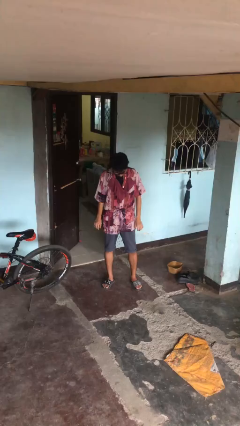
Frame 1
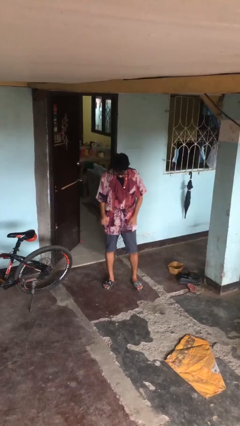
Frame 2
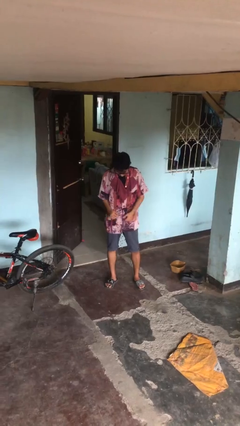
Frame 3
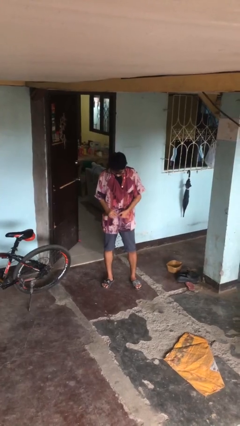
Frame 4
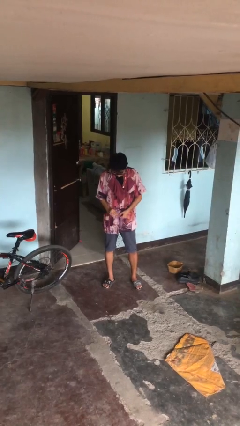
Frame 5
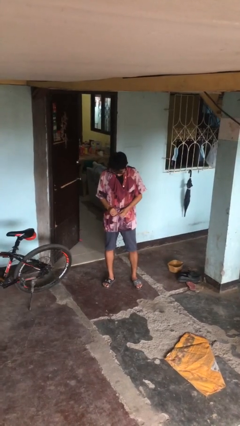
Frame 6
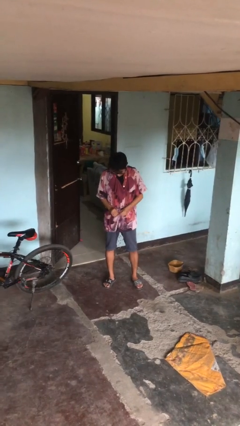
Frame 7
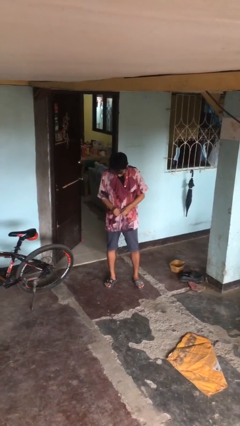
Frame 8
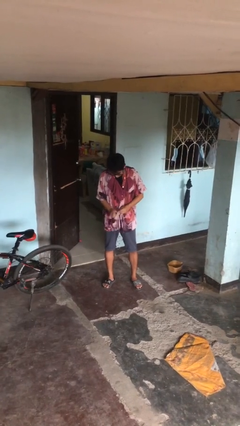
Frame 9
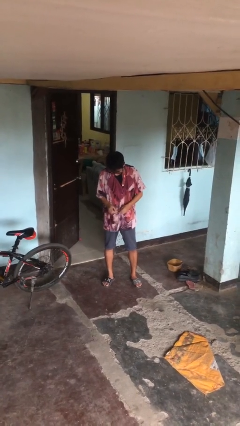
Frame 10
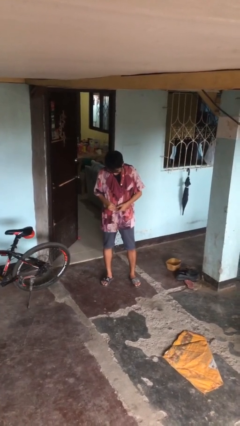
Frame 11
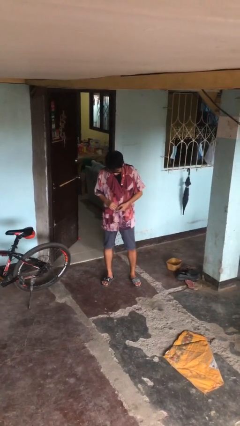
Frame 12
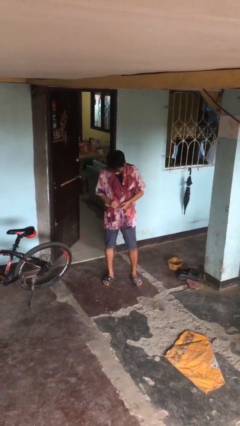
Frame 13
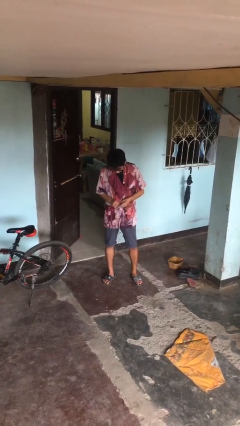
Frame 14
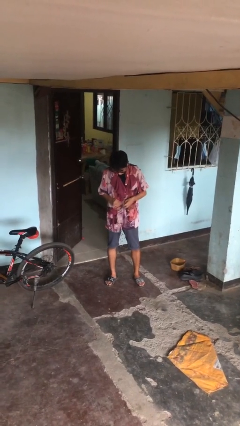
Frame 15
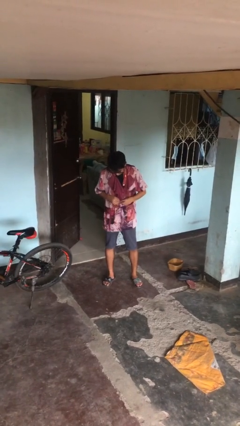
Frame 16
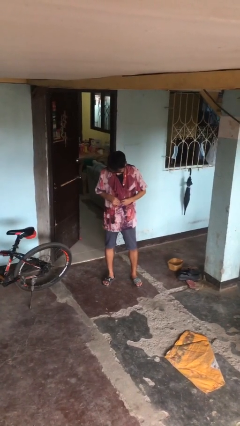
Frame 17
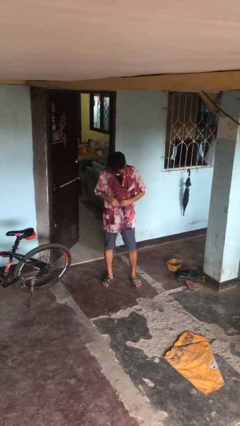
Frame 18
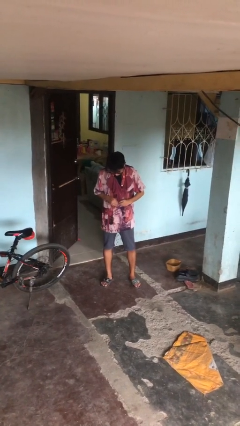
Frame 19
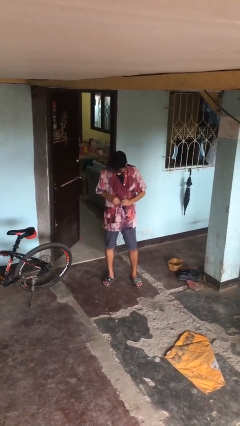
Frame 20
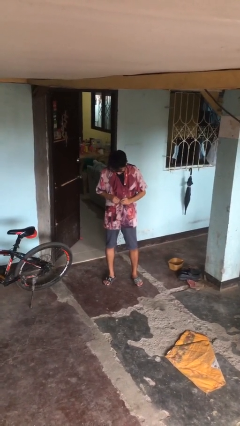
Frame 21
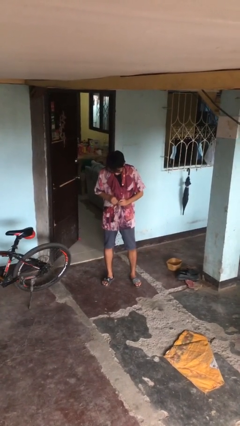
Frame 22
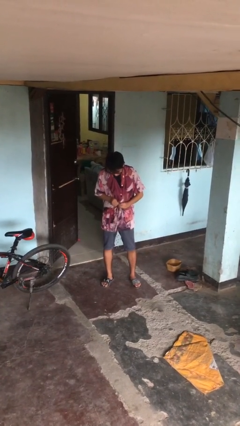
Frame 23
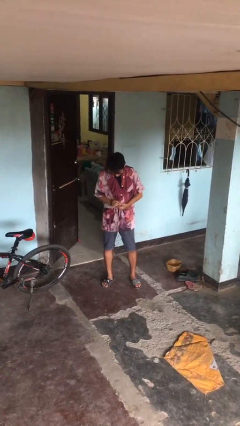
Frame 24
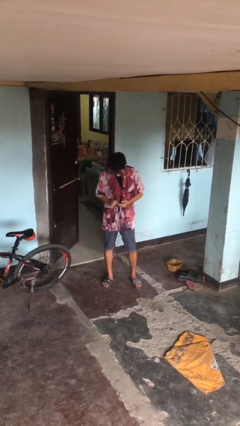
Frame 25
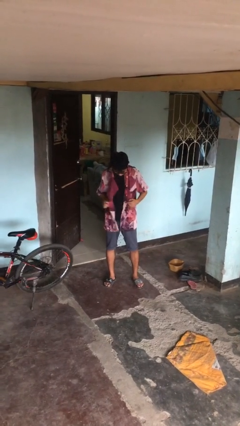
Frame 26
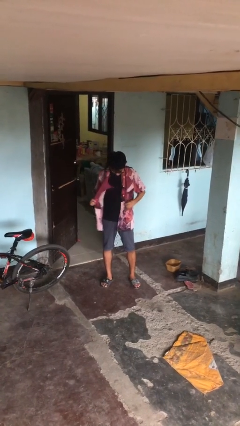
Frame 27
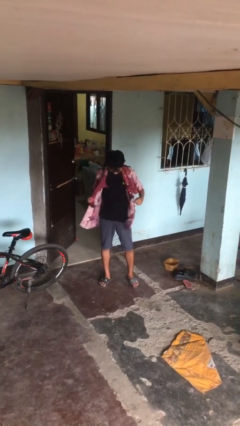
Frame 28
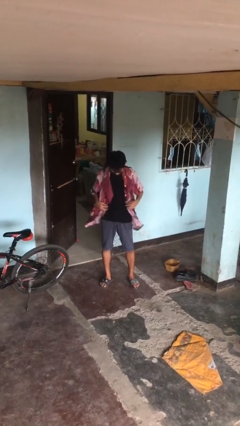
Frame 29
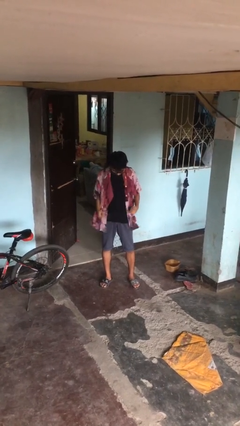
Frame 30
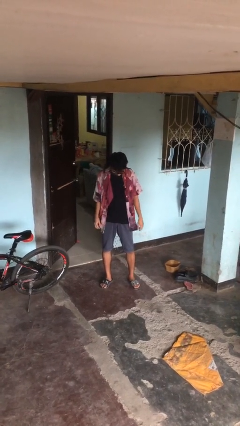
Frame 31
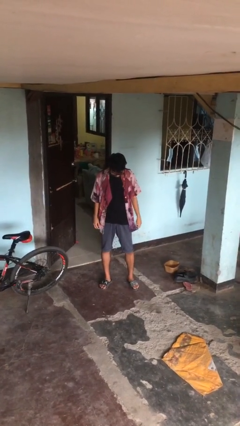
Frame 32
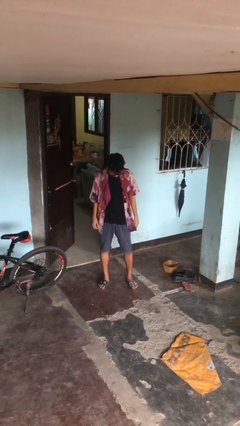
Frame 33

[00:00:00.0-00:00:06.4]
person unbuttons shirt

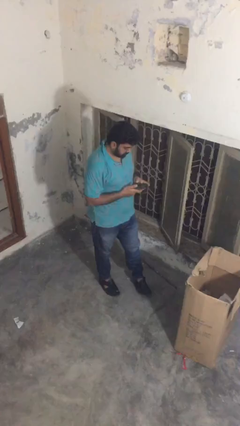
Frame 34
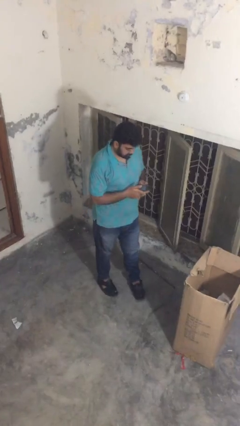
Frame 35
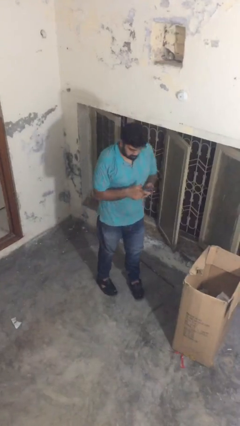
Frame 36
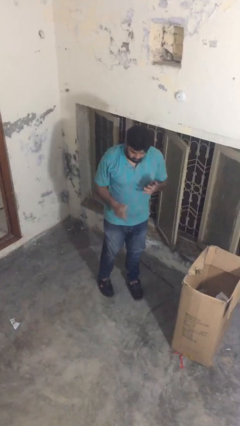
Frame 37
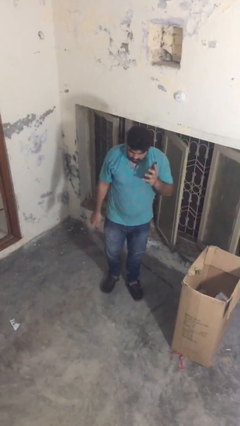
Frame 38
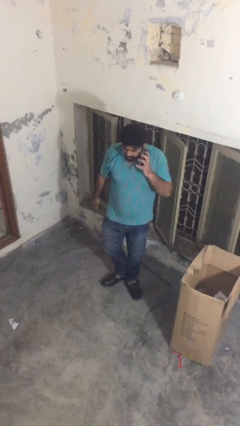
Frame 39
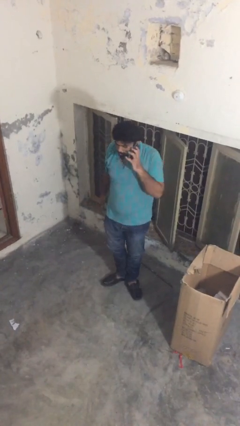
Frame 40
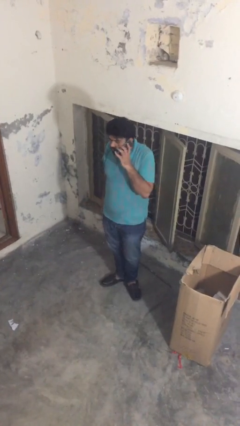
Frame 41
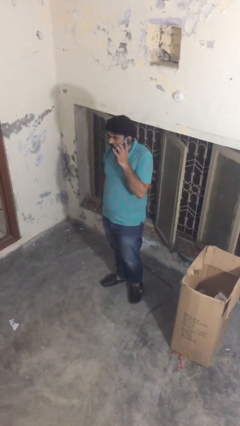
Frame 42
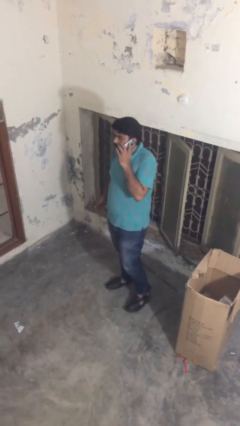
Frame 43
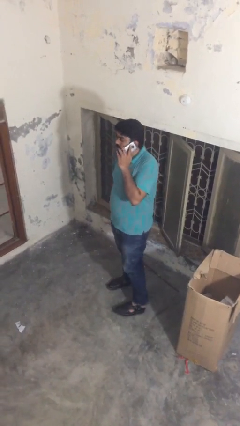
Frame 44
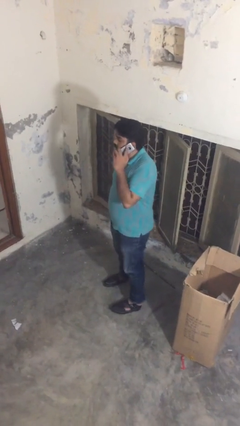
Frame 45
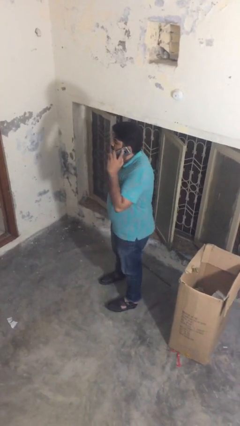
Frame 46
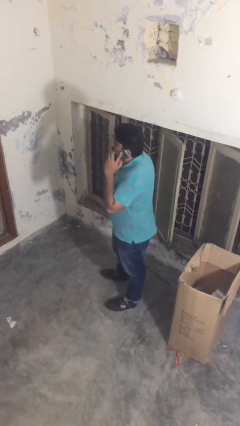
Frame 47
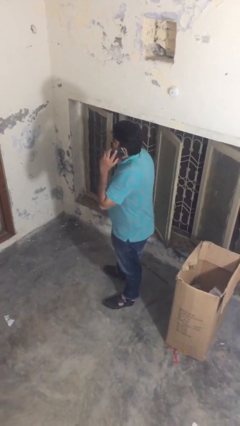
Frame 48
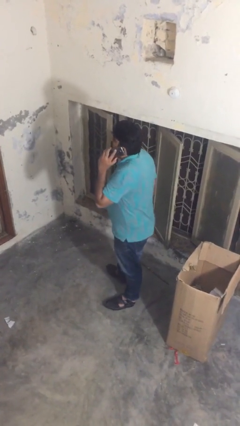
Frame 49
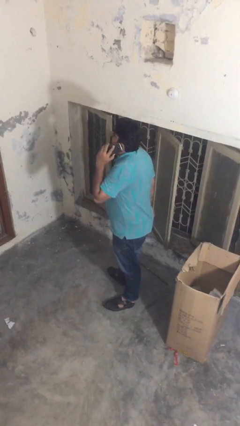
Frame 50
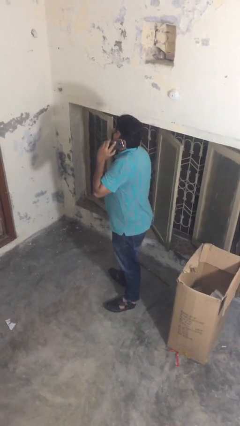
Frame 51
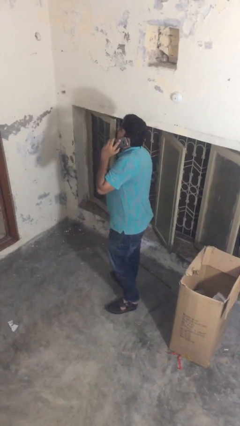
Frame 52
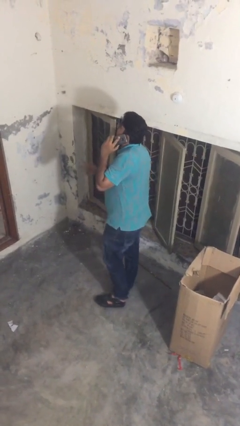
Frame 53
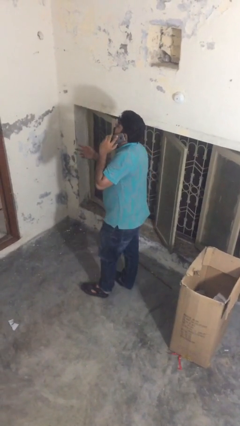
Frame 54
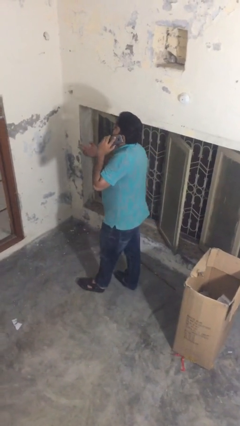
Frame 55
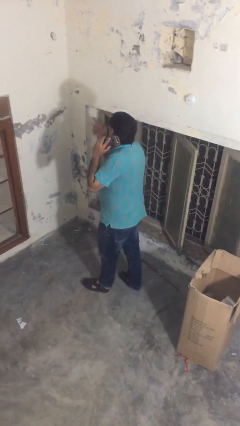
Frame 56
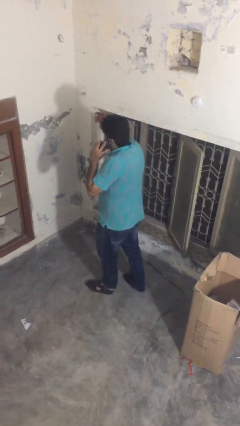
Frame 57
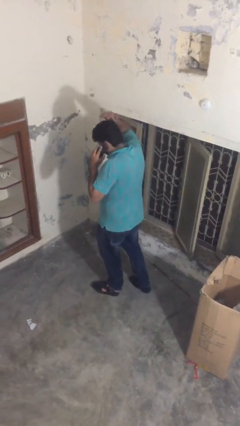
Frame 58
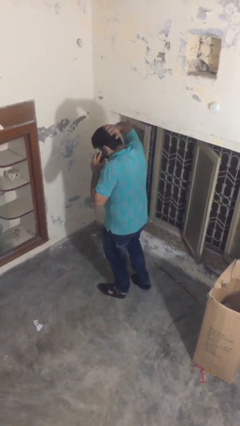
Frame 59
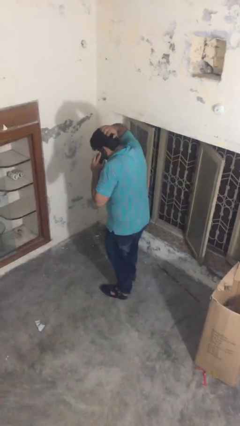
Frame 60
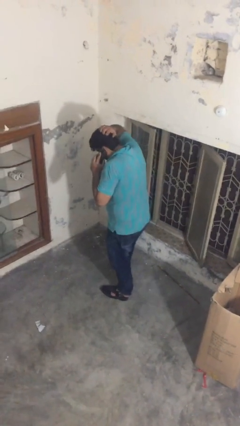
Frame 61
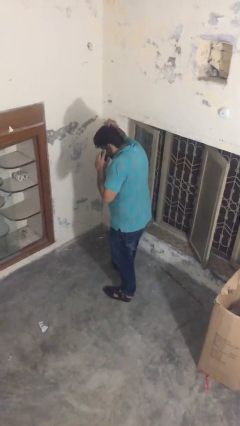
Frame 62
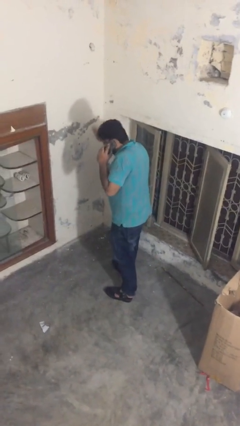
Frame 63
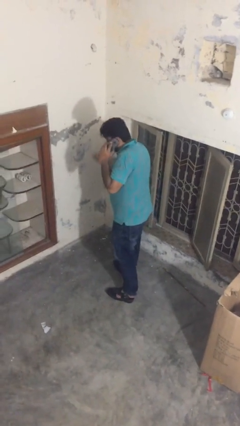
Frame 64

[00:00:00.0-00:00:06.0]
person talks on phone

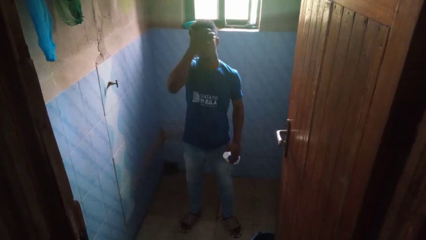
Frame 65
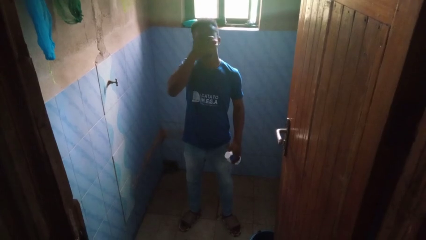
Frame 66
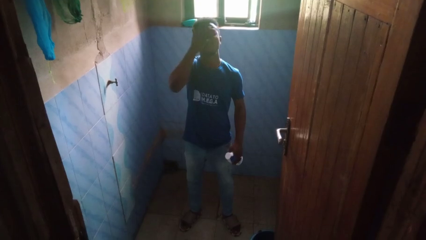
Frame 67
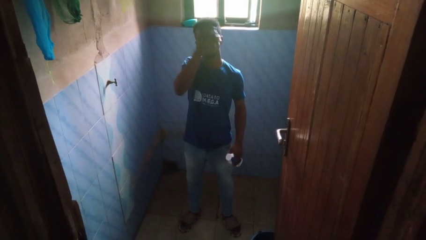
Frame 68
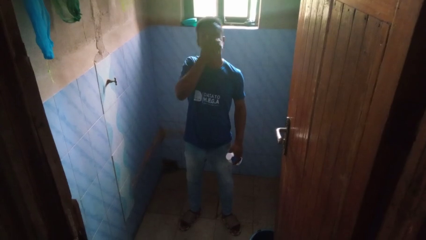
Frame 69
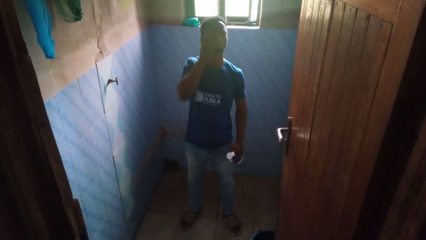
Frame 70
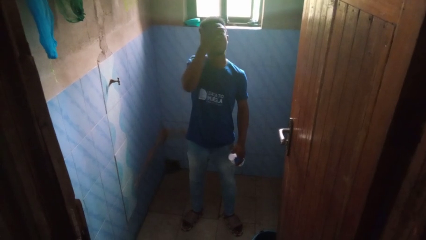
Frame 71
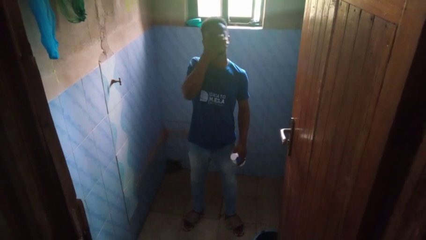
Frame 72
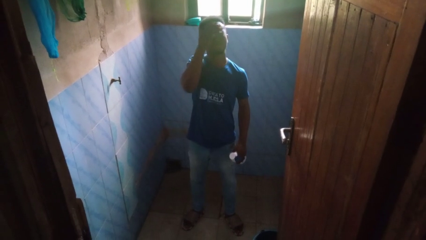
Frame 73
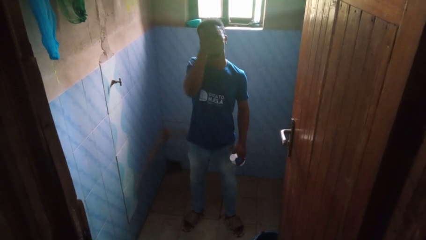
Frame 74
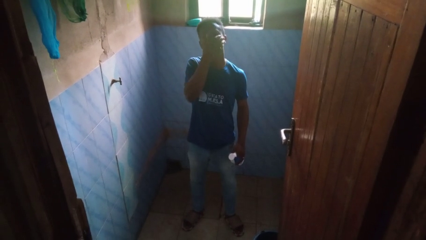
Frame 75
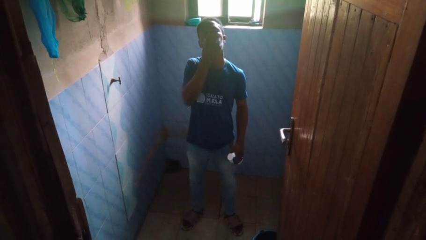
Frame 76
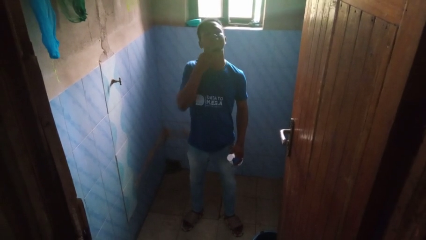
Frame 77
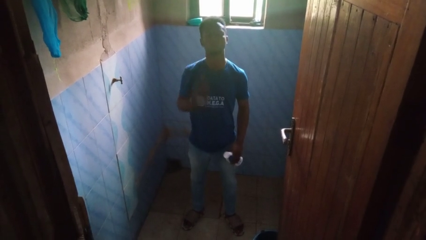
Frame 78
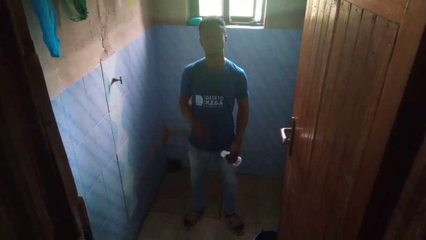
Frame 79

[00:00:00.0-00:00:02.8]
person applies facial moisturizer

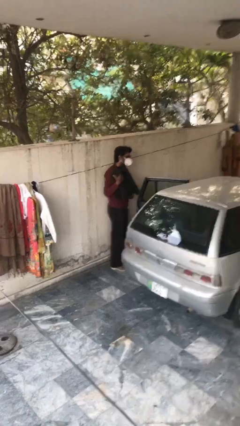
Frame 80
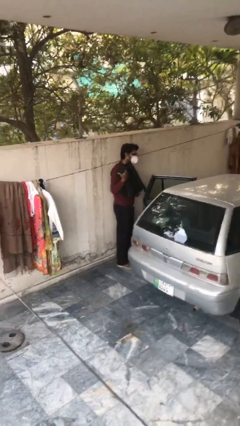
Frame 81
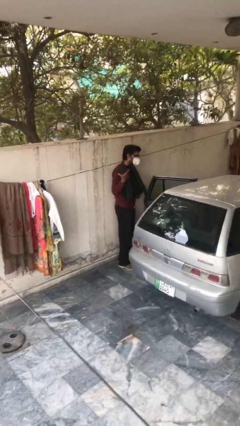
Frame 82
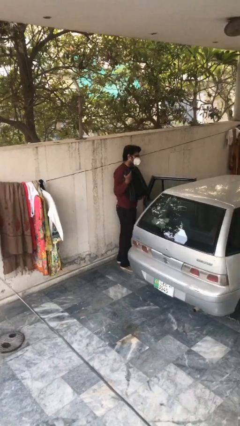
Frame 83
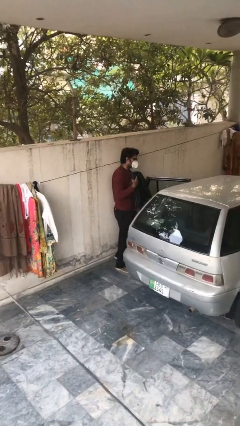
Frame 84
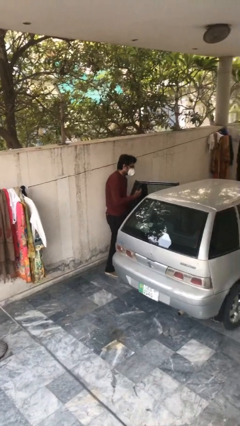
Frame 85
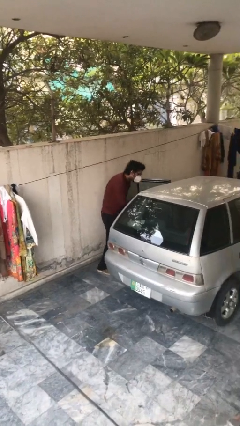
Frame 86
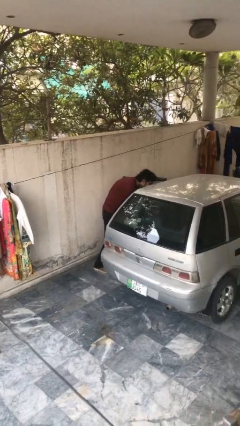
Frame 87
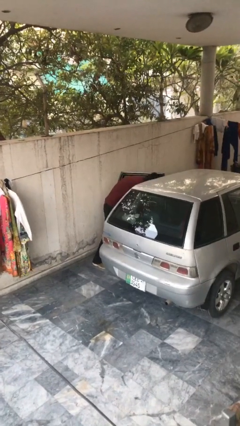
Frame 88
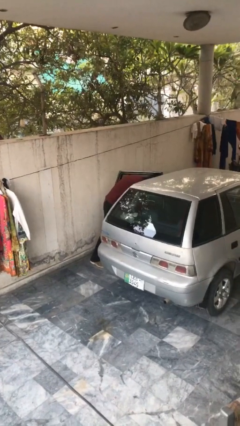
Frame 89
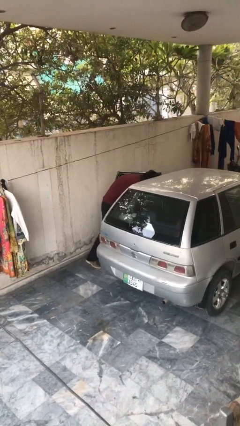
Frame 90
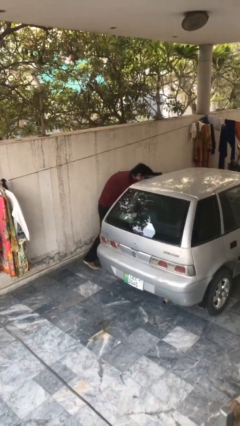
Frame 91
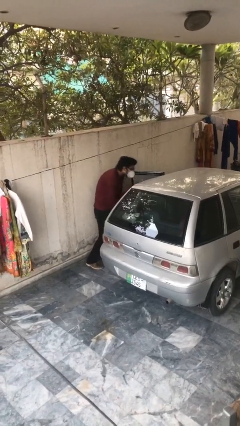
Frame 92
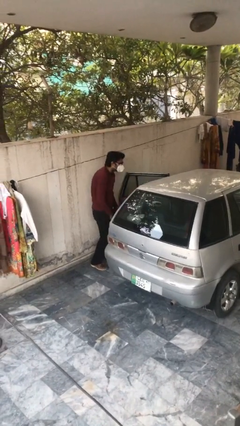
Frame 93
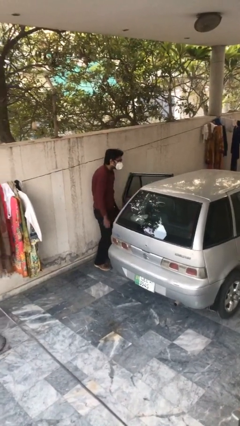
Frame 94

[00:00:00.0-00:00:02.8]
person loads car
